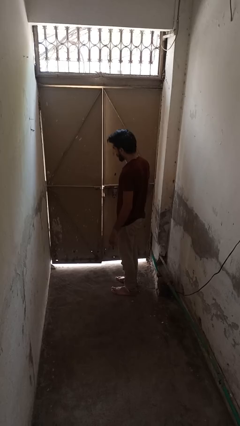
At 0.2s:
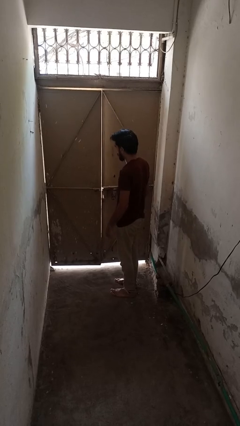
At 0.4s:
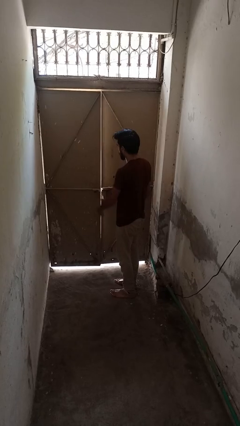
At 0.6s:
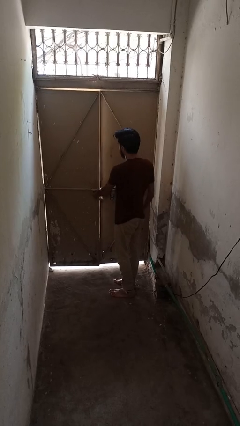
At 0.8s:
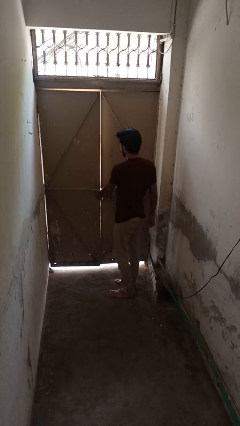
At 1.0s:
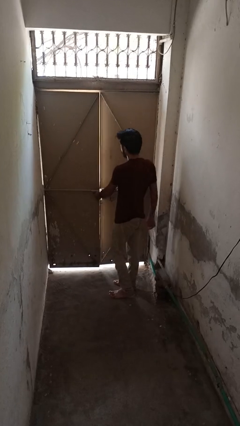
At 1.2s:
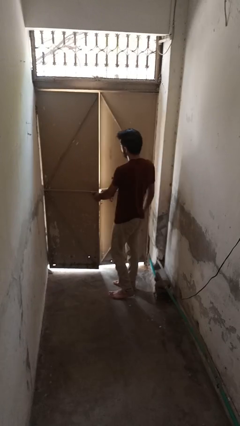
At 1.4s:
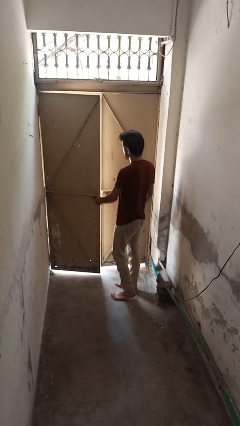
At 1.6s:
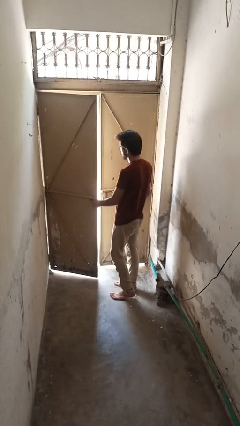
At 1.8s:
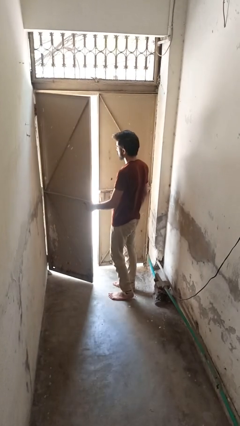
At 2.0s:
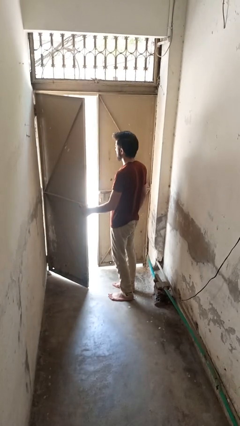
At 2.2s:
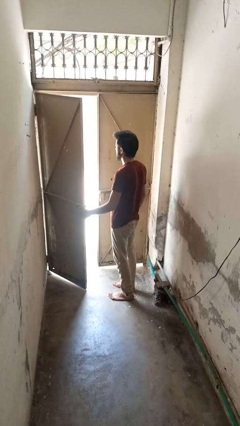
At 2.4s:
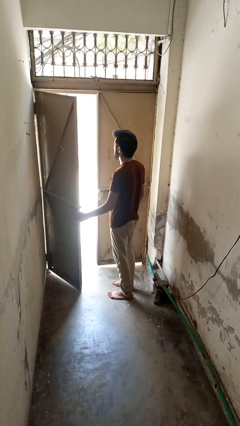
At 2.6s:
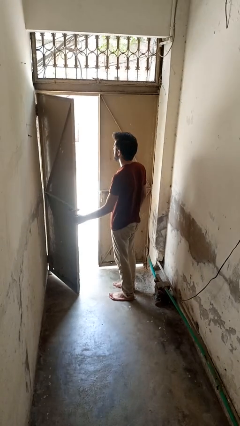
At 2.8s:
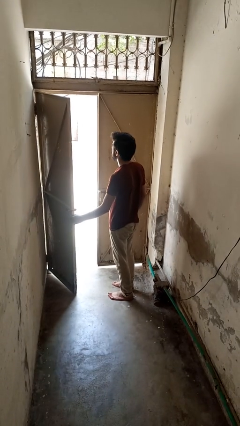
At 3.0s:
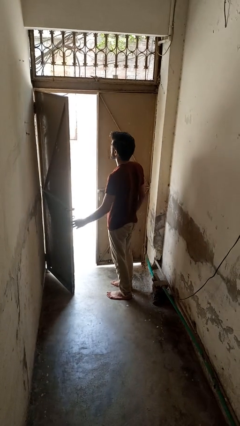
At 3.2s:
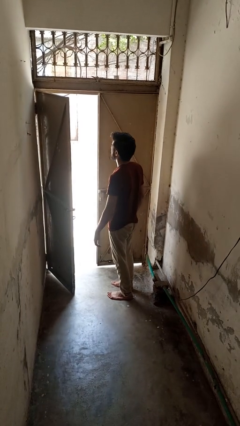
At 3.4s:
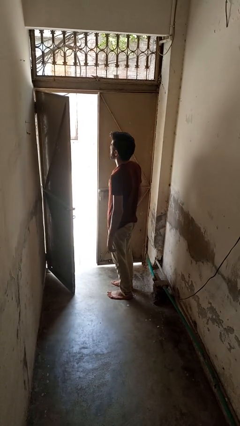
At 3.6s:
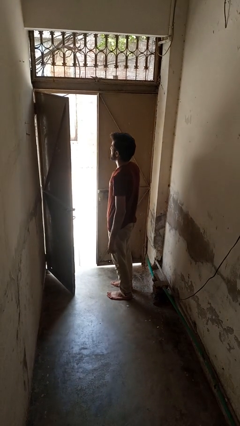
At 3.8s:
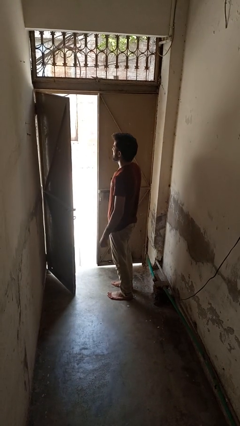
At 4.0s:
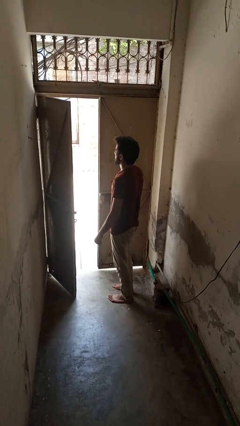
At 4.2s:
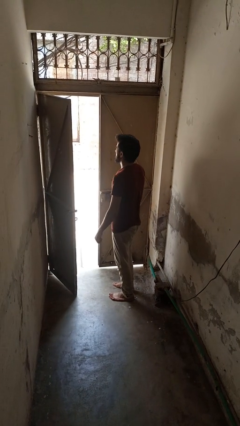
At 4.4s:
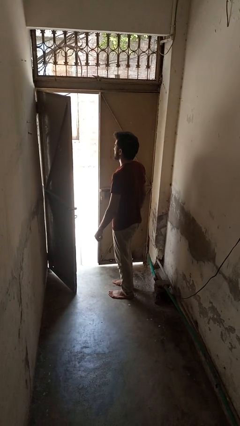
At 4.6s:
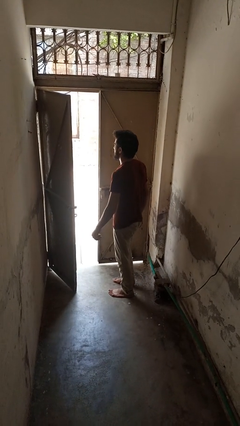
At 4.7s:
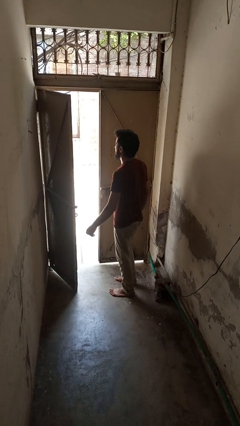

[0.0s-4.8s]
person opens gate

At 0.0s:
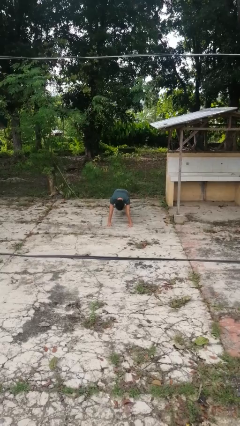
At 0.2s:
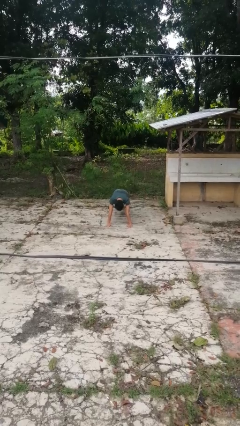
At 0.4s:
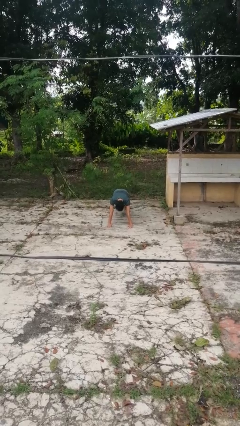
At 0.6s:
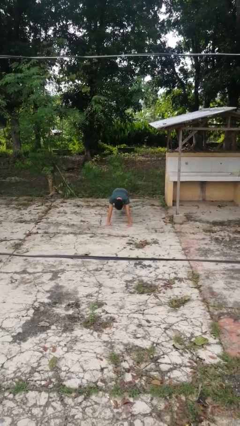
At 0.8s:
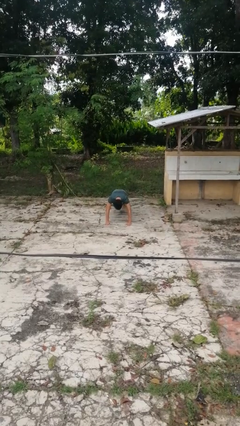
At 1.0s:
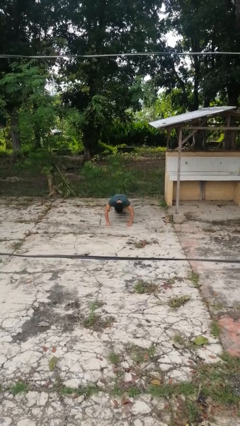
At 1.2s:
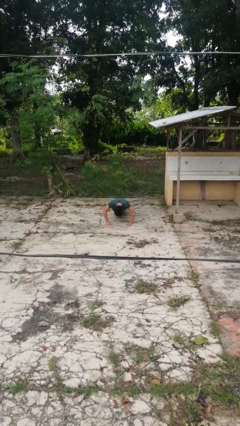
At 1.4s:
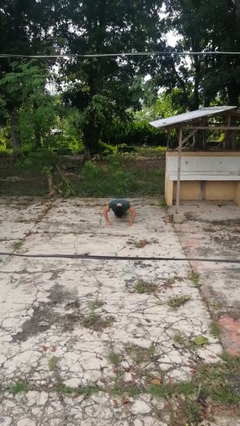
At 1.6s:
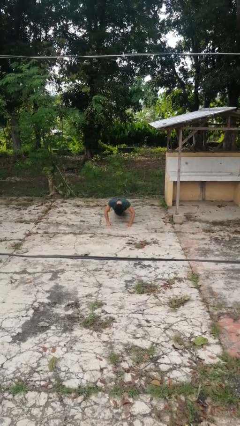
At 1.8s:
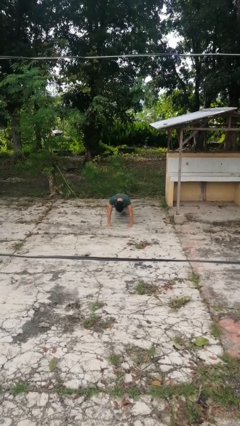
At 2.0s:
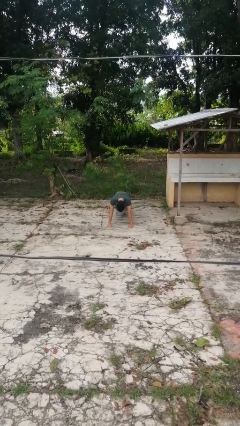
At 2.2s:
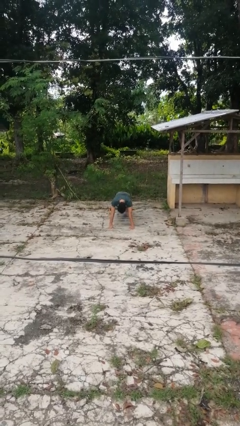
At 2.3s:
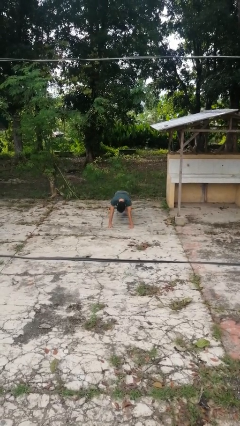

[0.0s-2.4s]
person exercises with pushup

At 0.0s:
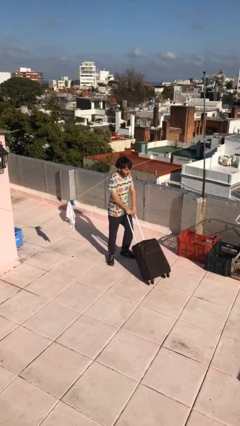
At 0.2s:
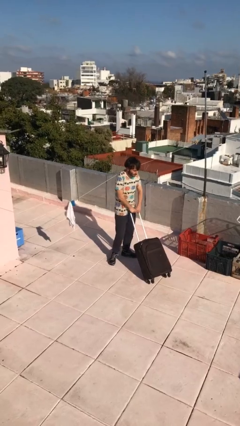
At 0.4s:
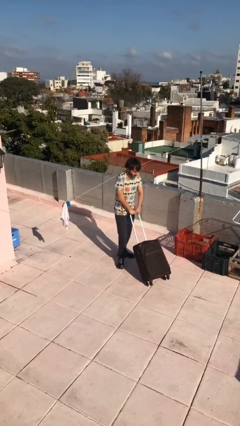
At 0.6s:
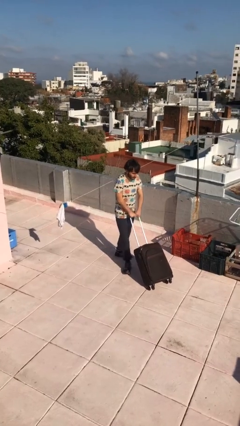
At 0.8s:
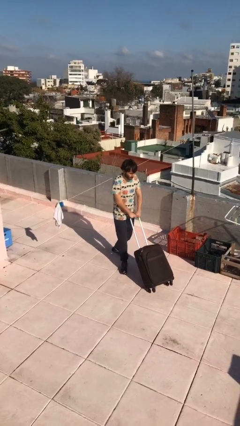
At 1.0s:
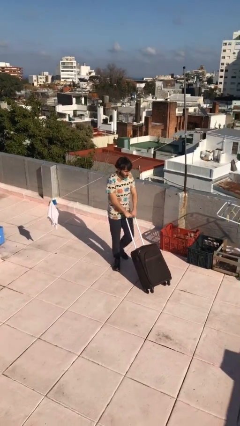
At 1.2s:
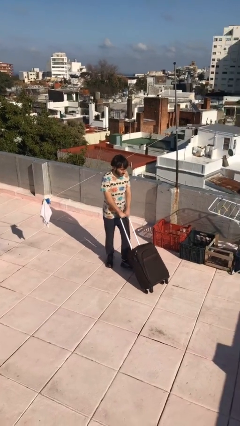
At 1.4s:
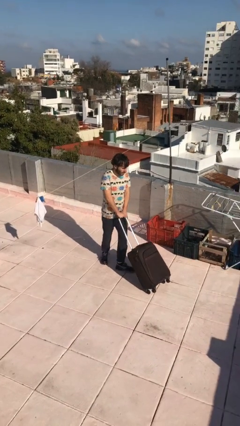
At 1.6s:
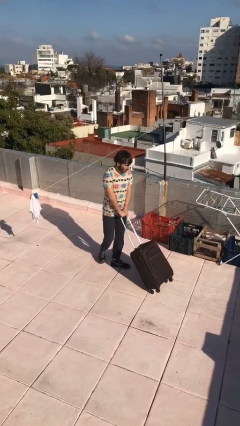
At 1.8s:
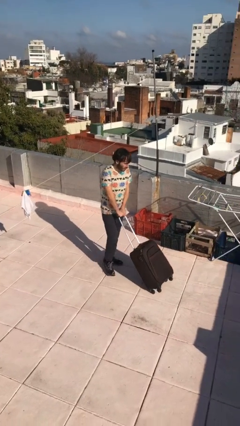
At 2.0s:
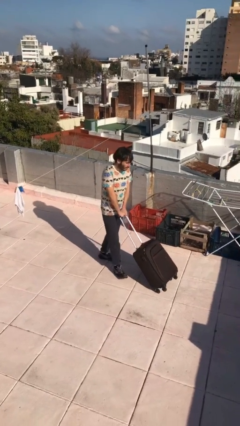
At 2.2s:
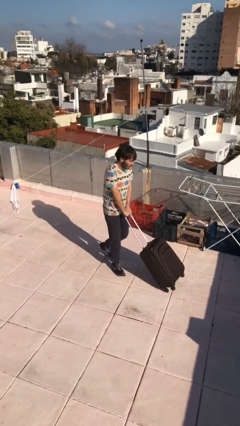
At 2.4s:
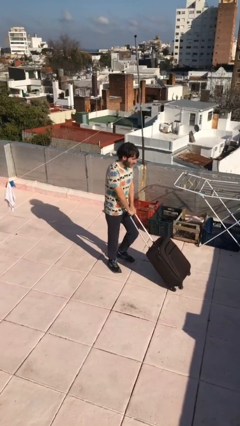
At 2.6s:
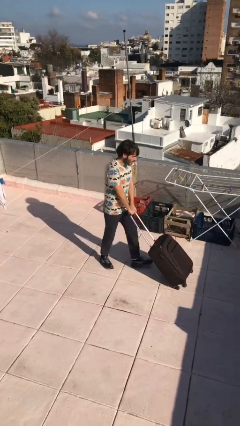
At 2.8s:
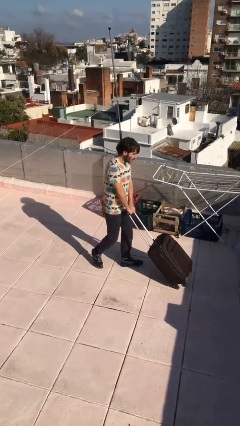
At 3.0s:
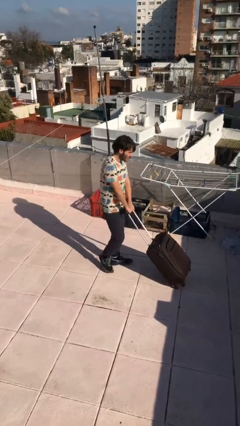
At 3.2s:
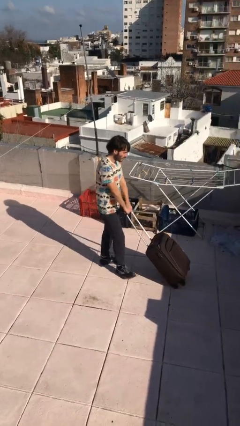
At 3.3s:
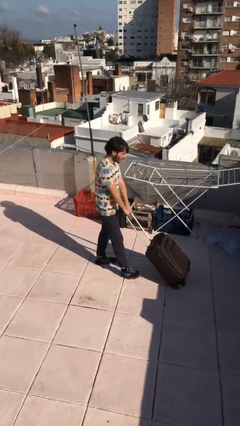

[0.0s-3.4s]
person pushes wheeled cart

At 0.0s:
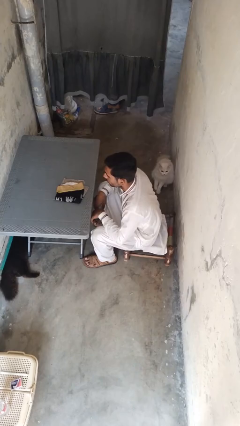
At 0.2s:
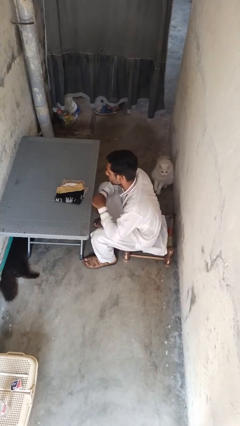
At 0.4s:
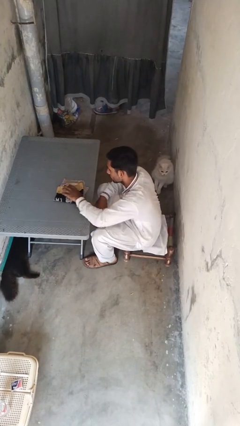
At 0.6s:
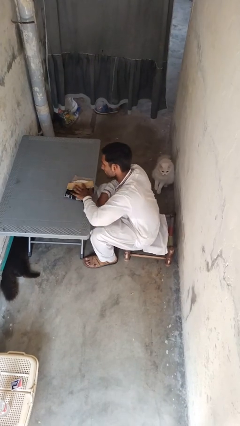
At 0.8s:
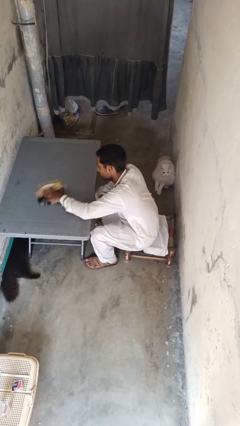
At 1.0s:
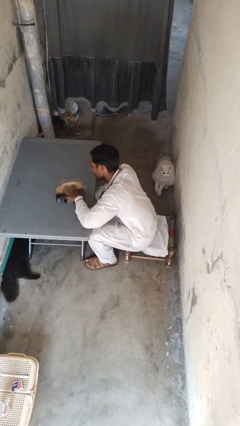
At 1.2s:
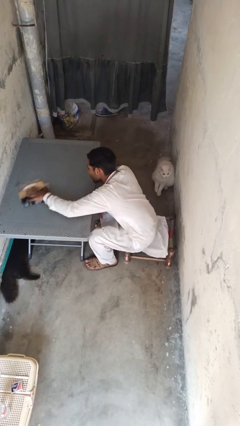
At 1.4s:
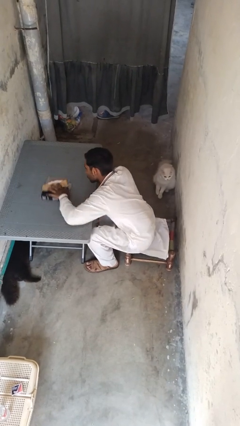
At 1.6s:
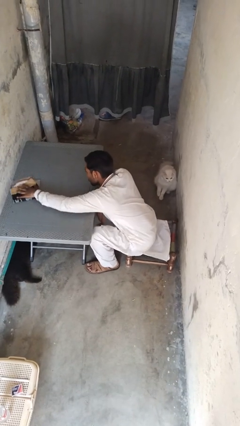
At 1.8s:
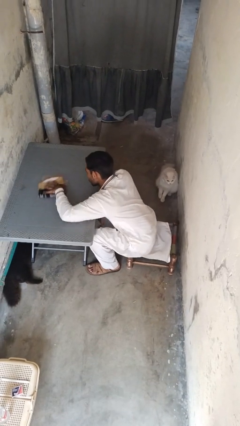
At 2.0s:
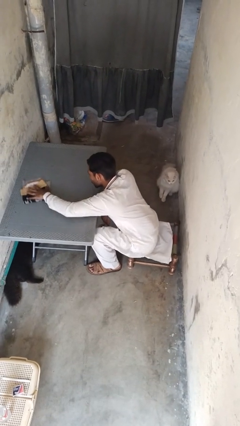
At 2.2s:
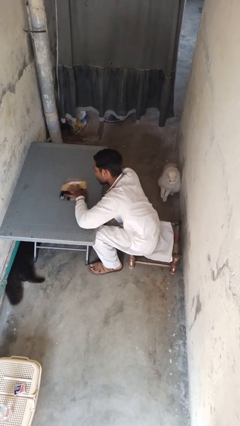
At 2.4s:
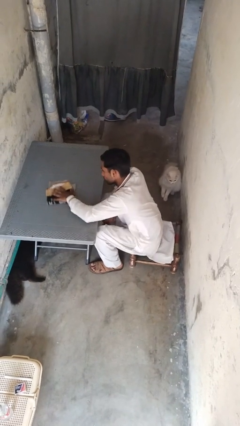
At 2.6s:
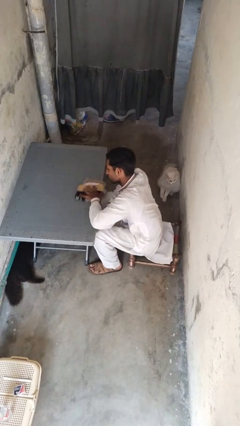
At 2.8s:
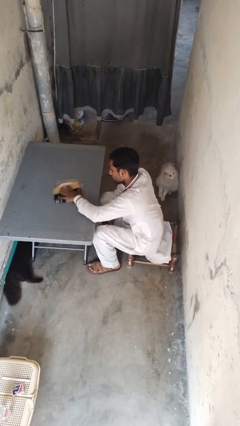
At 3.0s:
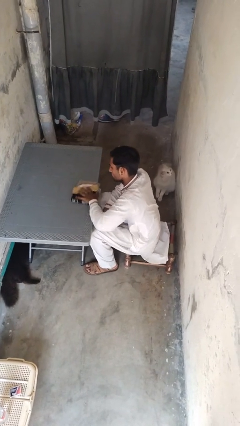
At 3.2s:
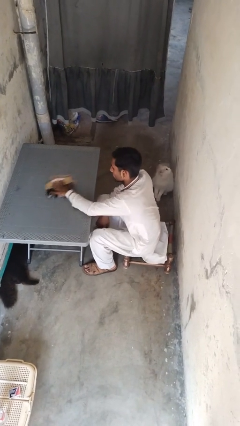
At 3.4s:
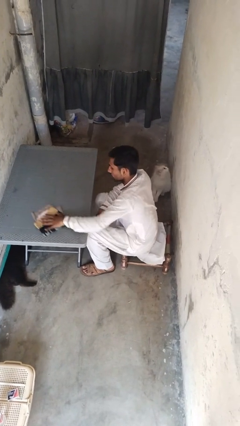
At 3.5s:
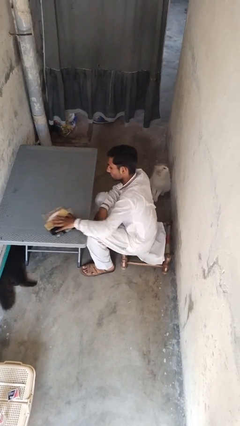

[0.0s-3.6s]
person cleans table with rag

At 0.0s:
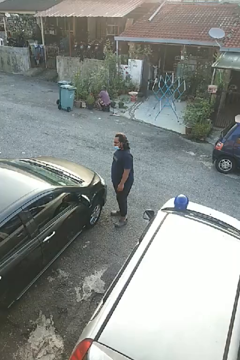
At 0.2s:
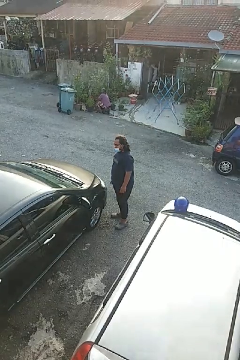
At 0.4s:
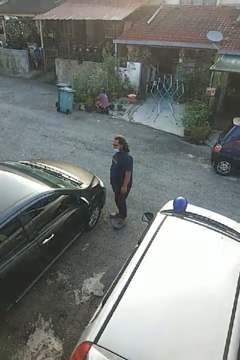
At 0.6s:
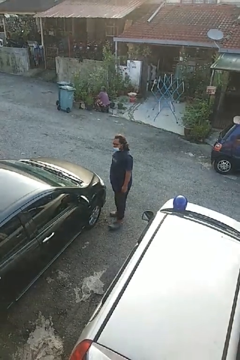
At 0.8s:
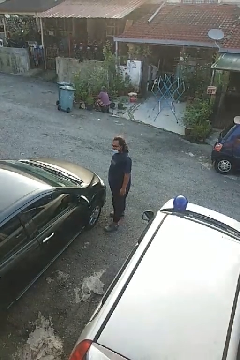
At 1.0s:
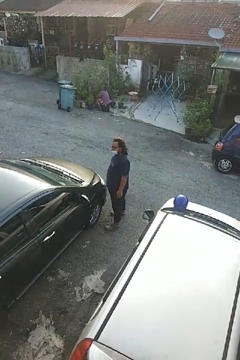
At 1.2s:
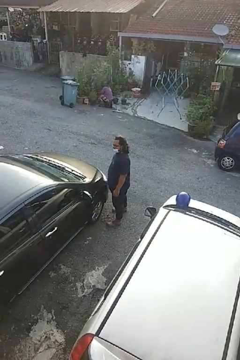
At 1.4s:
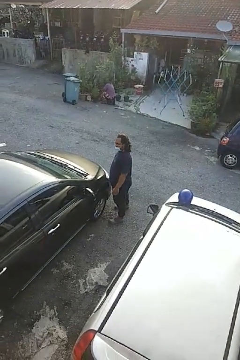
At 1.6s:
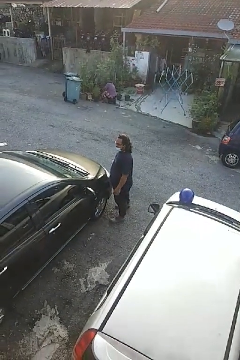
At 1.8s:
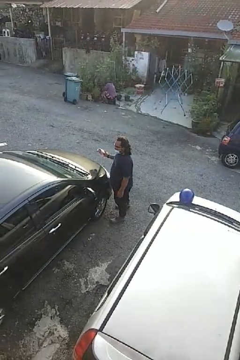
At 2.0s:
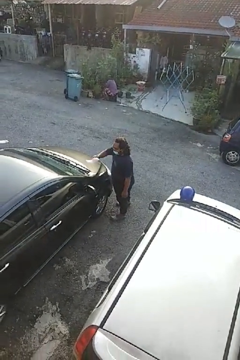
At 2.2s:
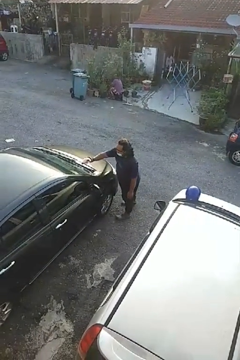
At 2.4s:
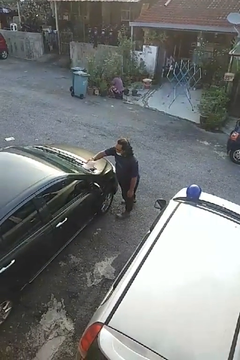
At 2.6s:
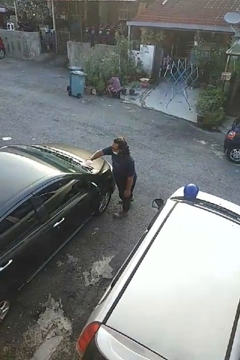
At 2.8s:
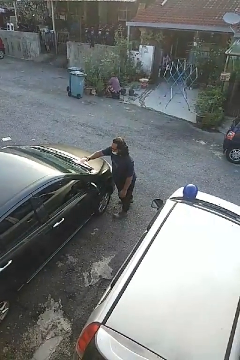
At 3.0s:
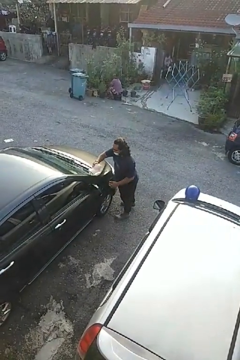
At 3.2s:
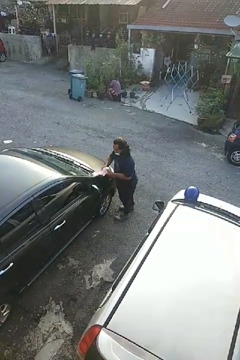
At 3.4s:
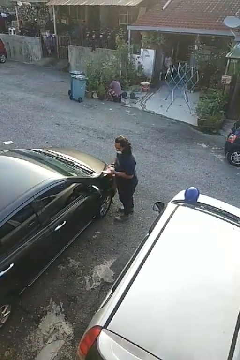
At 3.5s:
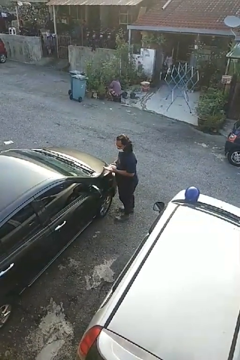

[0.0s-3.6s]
person polishes car with rag

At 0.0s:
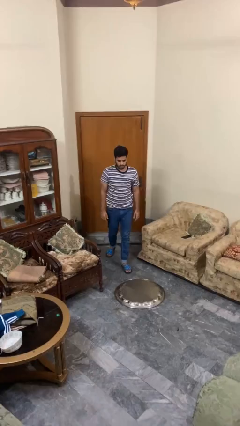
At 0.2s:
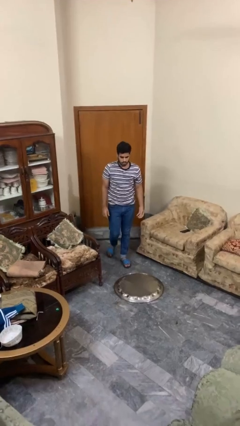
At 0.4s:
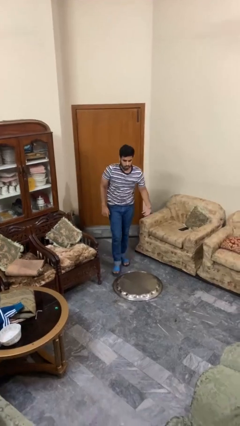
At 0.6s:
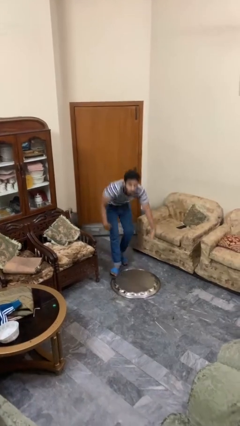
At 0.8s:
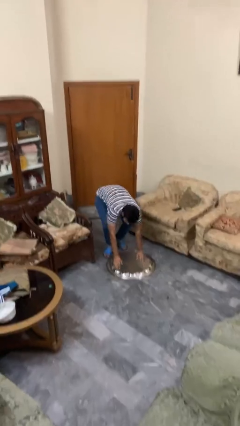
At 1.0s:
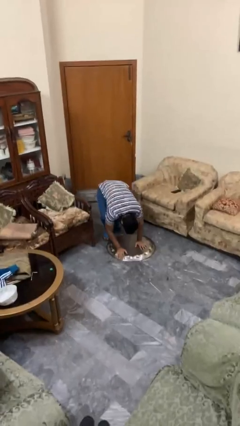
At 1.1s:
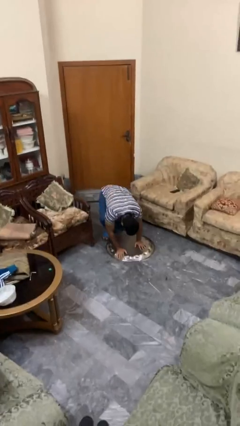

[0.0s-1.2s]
person trips on object on floor
